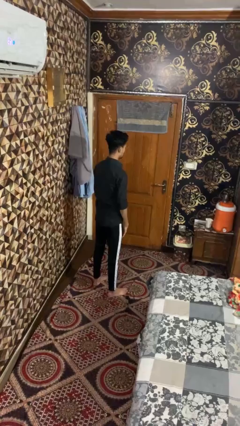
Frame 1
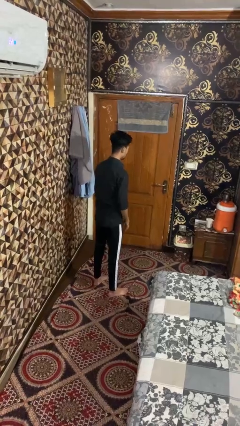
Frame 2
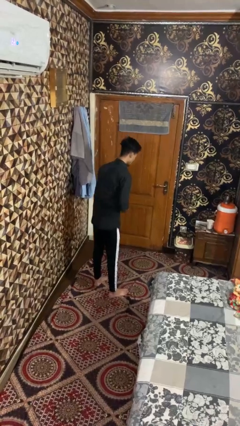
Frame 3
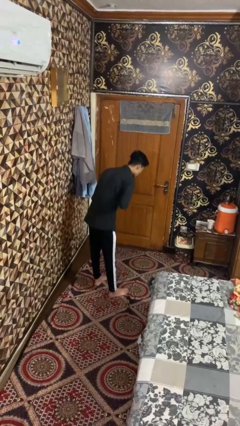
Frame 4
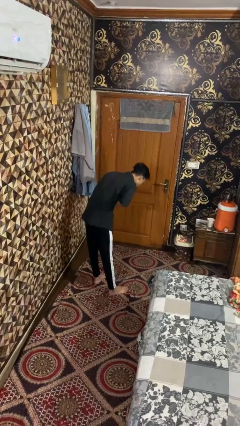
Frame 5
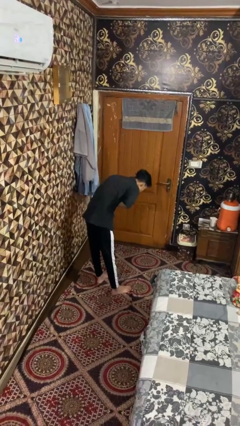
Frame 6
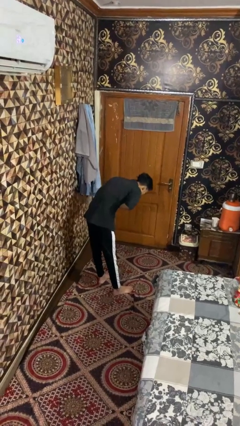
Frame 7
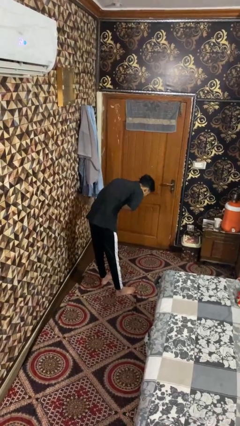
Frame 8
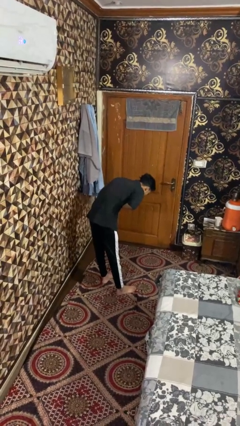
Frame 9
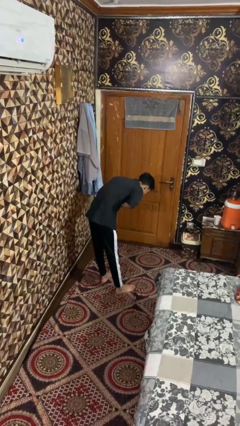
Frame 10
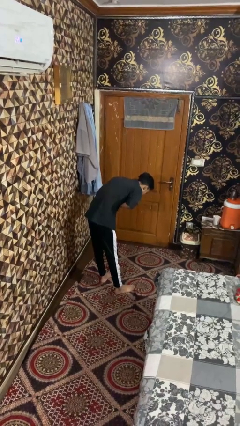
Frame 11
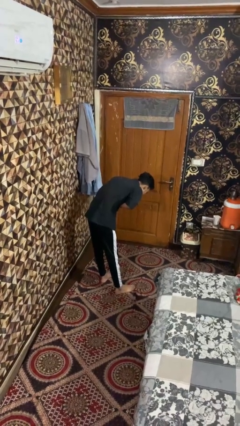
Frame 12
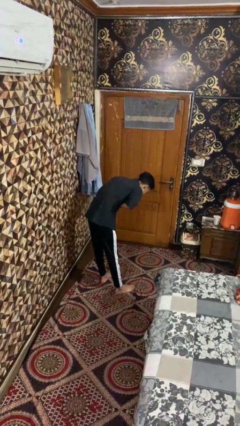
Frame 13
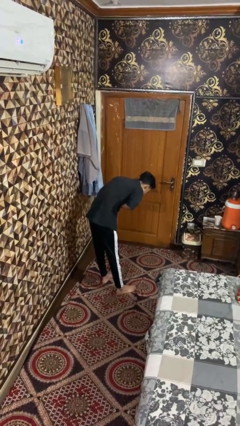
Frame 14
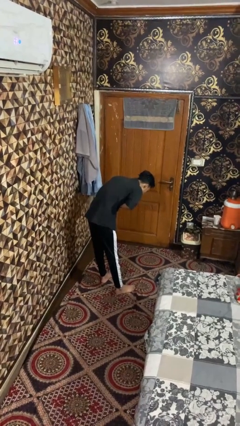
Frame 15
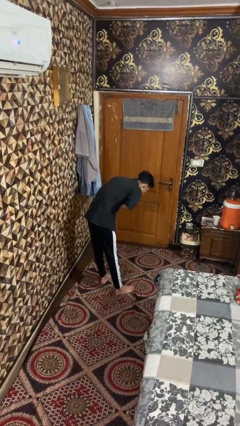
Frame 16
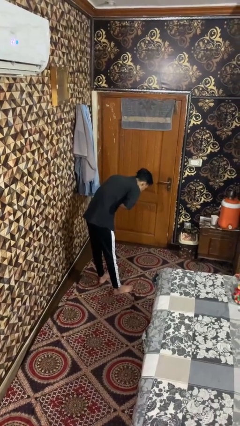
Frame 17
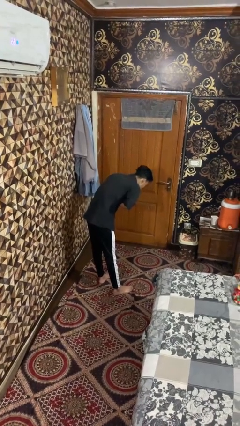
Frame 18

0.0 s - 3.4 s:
person bows

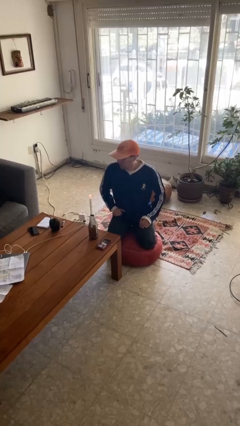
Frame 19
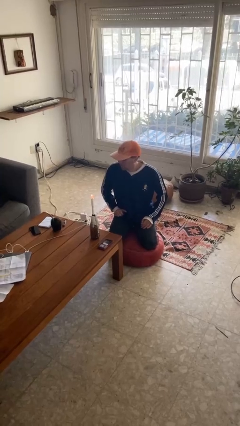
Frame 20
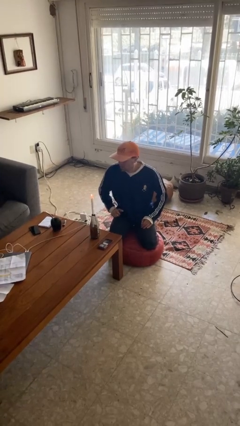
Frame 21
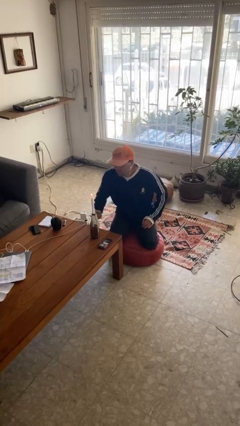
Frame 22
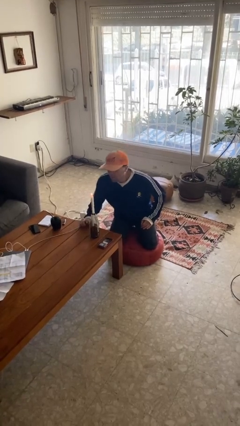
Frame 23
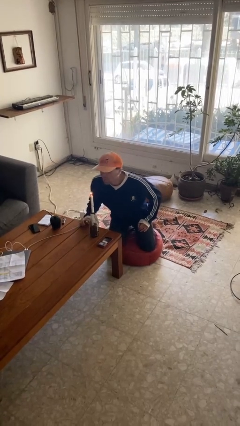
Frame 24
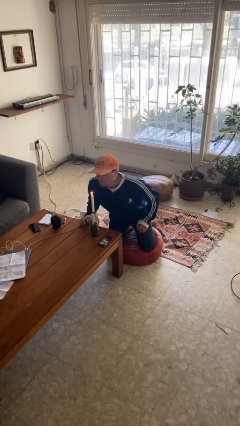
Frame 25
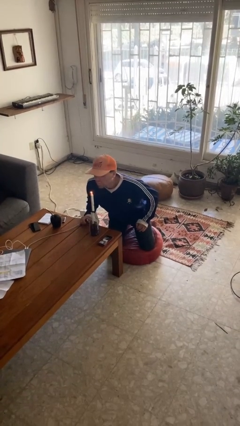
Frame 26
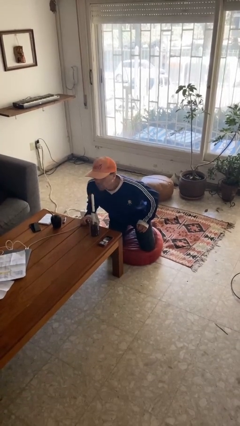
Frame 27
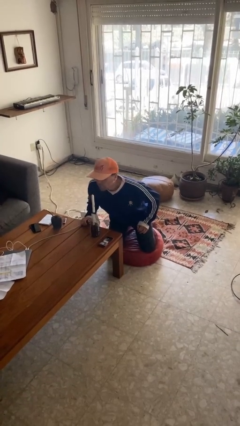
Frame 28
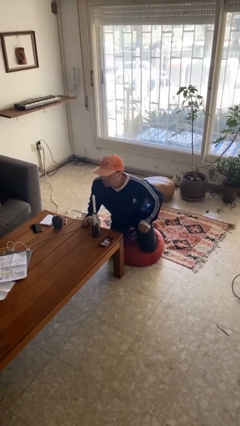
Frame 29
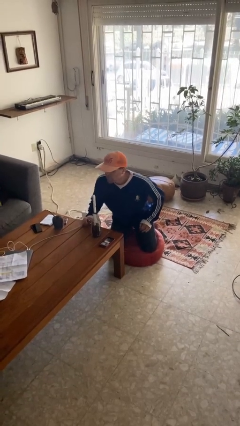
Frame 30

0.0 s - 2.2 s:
person extinguishes candle

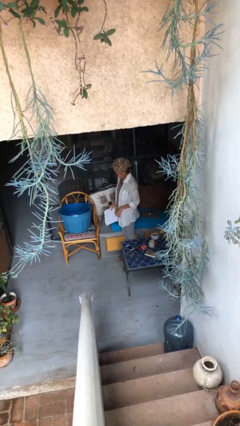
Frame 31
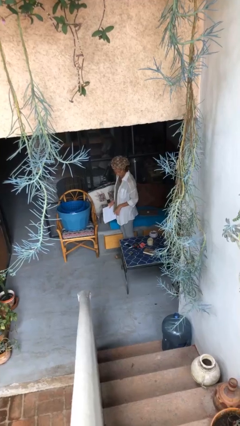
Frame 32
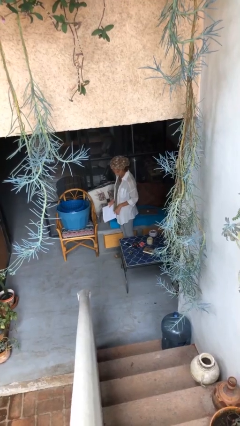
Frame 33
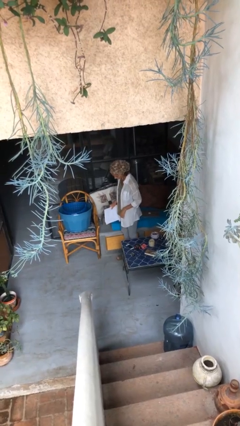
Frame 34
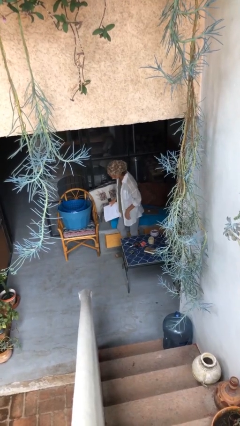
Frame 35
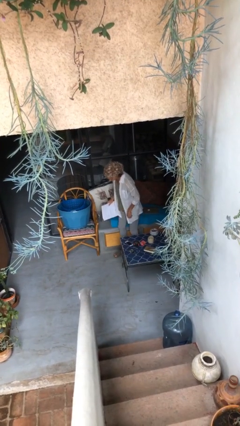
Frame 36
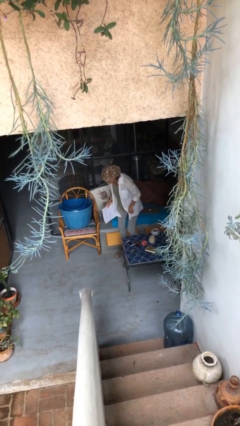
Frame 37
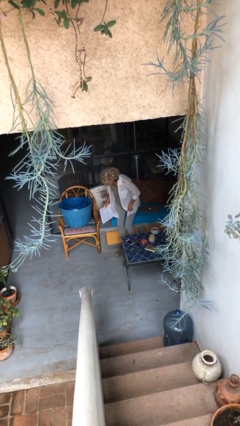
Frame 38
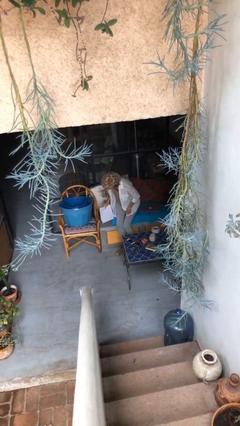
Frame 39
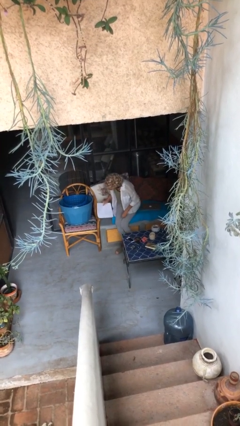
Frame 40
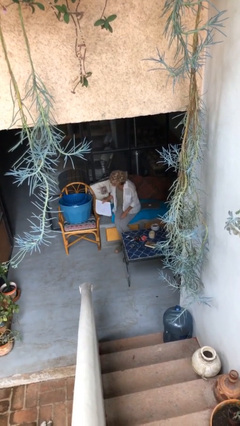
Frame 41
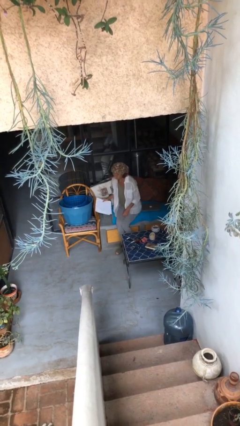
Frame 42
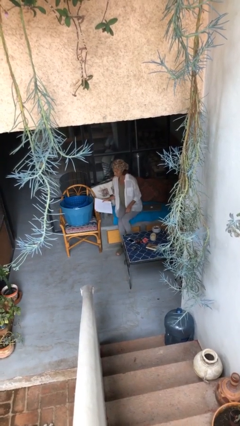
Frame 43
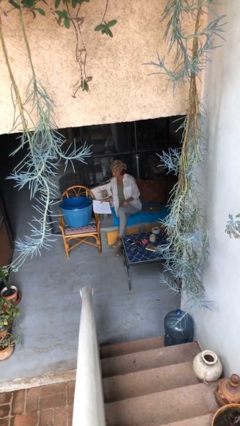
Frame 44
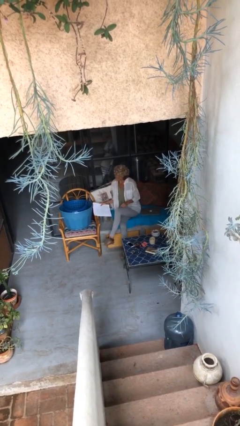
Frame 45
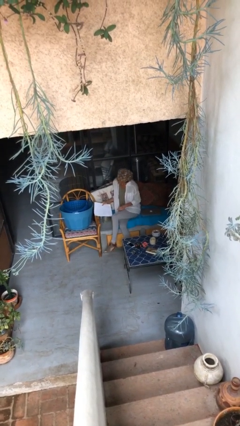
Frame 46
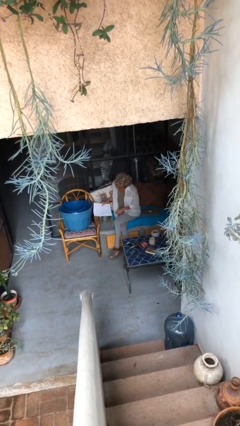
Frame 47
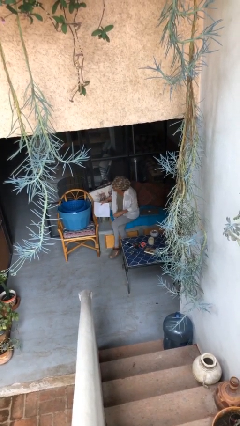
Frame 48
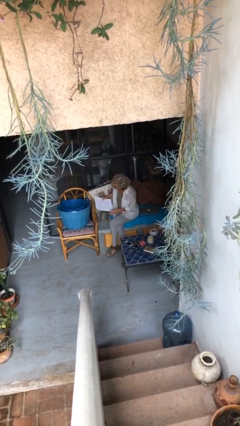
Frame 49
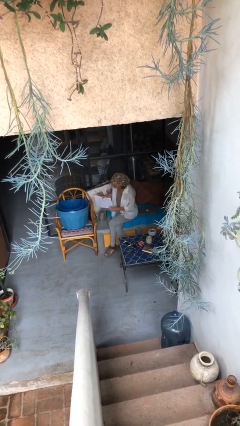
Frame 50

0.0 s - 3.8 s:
person sits down

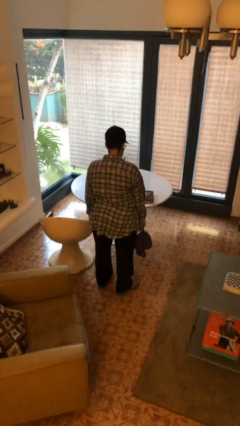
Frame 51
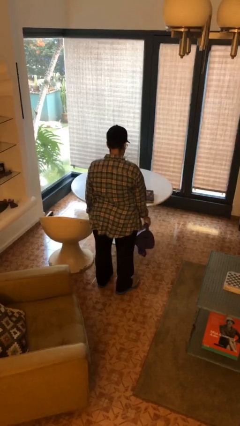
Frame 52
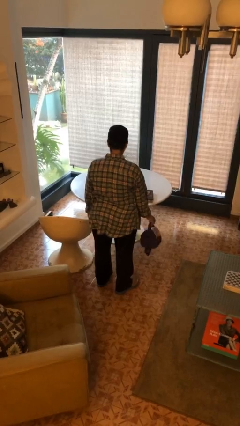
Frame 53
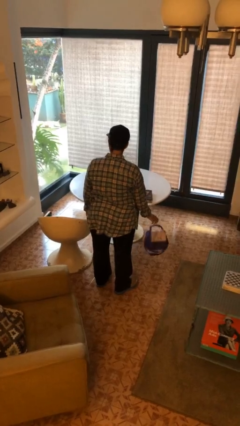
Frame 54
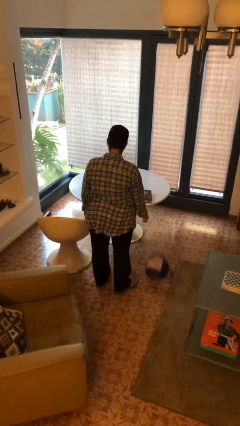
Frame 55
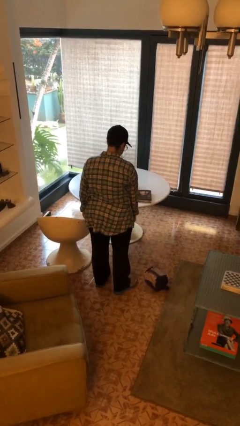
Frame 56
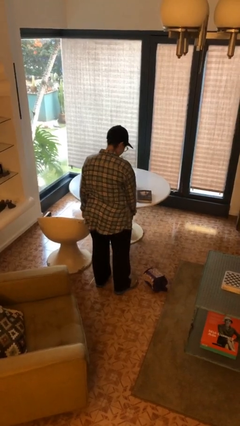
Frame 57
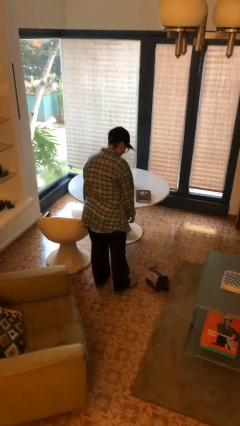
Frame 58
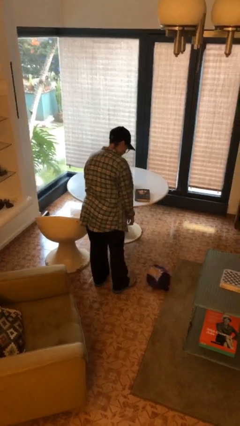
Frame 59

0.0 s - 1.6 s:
person drops object

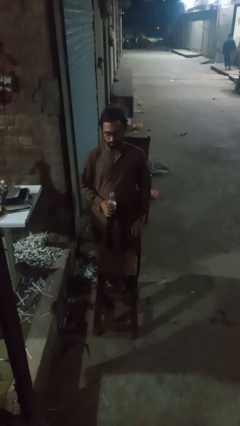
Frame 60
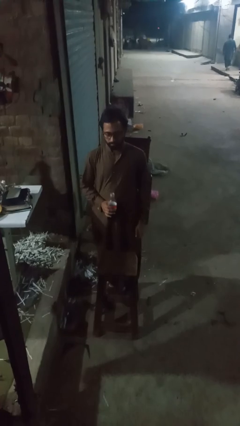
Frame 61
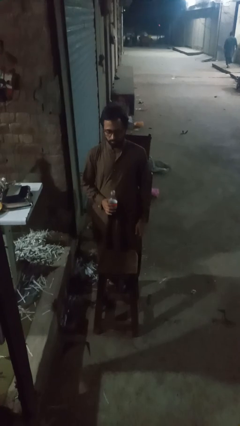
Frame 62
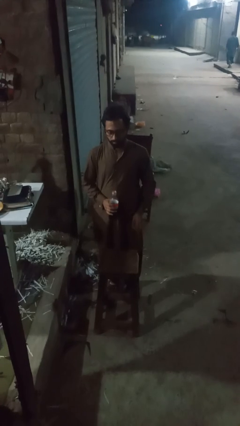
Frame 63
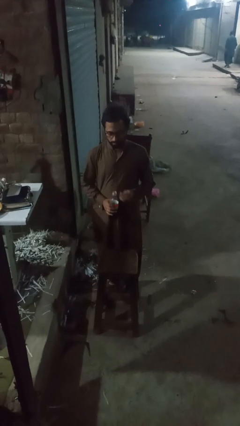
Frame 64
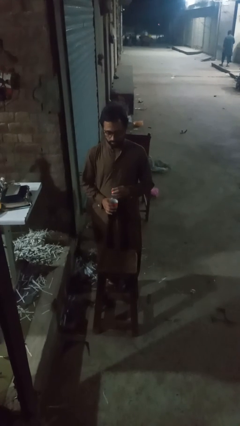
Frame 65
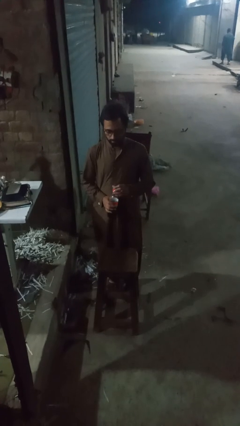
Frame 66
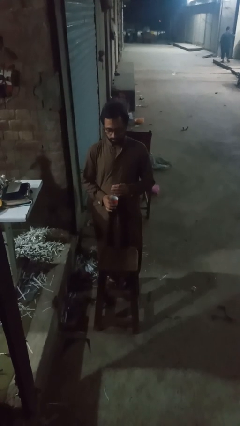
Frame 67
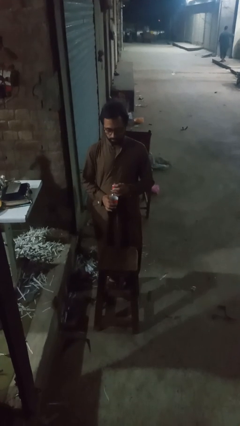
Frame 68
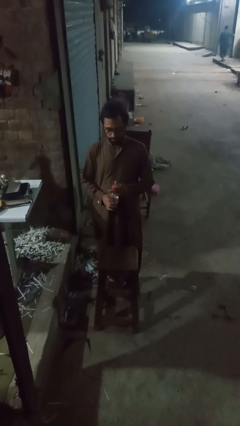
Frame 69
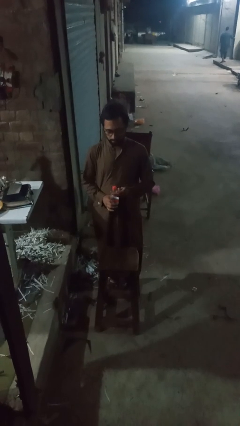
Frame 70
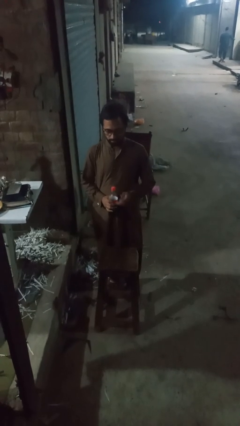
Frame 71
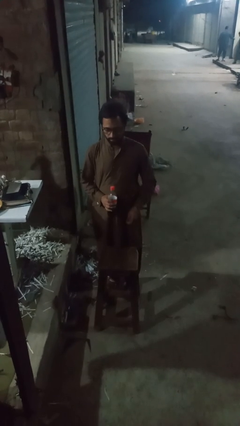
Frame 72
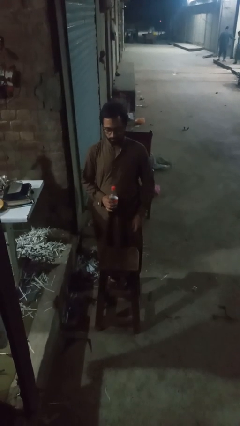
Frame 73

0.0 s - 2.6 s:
person screws lid to bottle

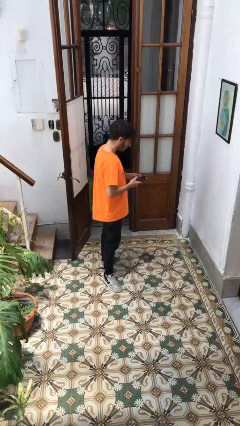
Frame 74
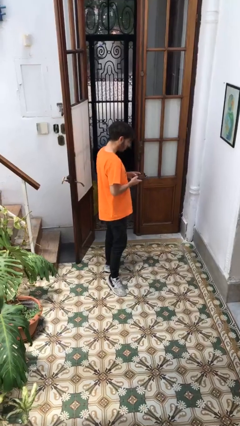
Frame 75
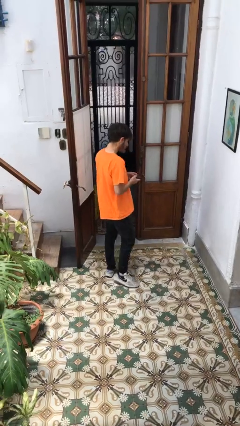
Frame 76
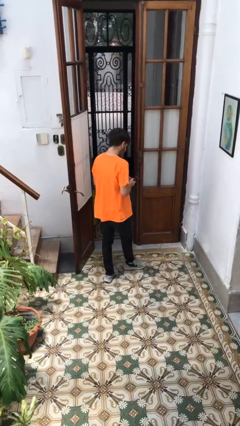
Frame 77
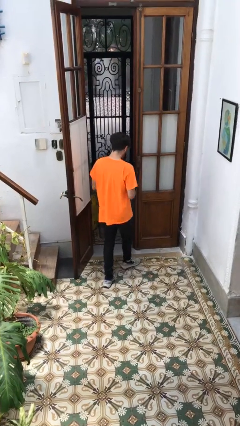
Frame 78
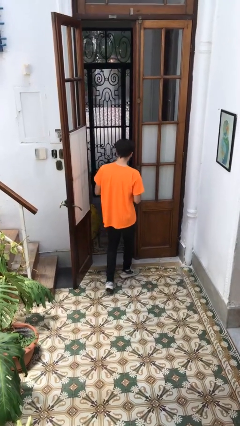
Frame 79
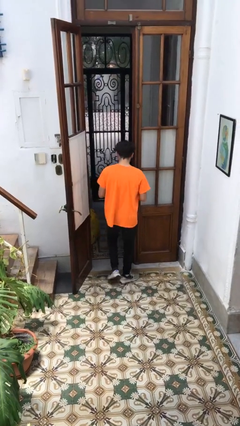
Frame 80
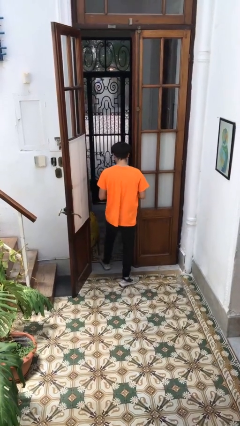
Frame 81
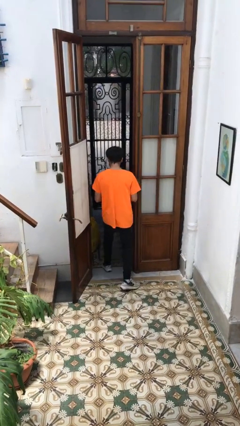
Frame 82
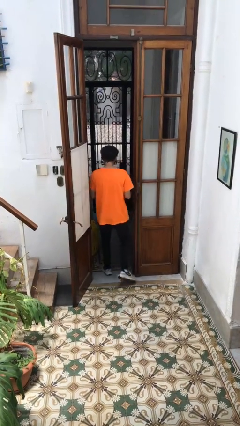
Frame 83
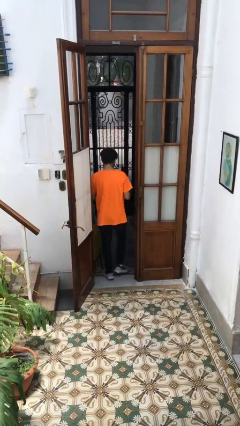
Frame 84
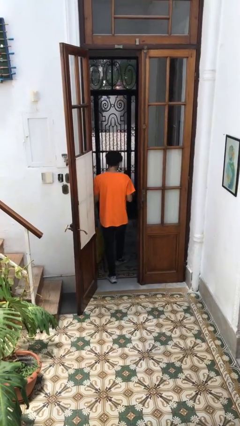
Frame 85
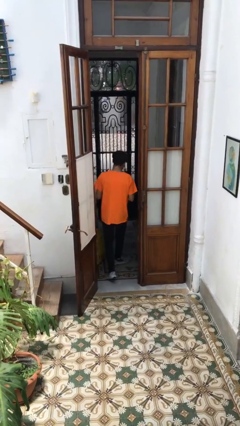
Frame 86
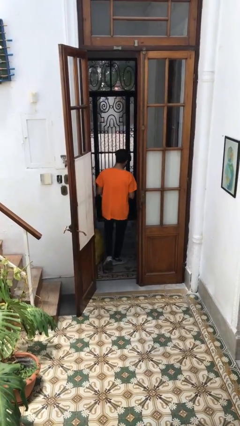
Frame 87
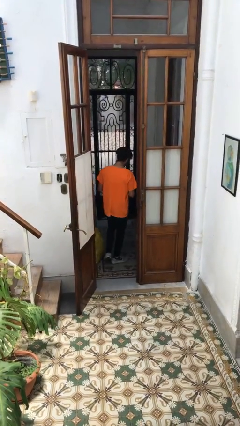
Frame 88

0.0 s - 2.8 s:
person exits scene through structure

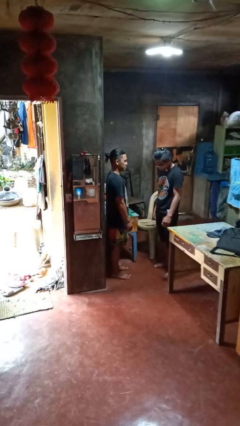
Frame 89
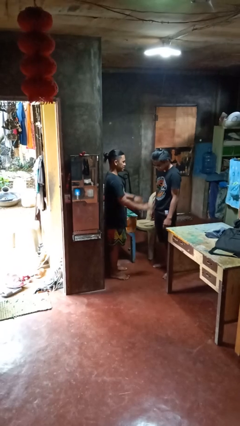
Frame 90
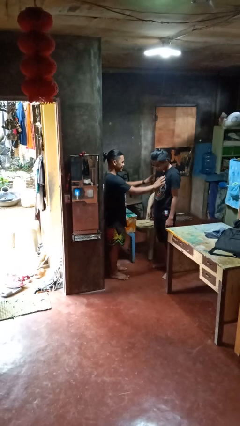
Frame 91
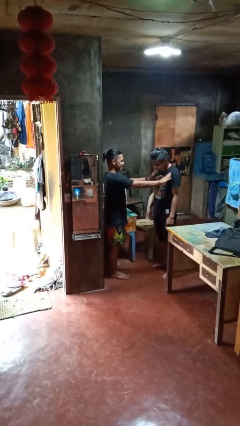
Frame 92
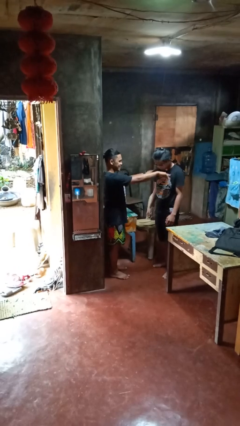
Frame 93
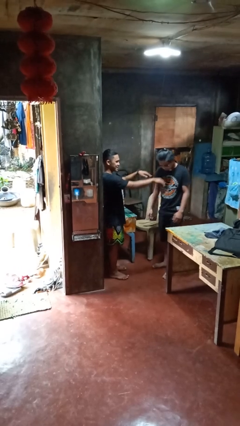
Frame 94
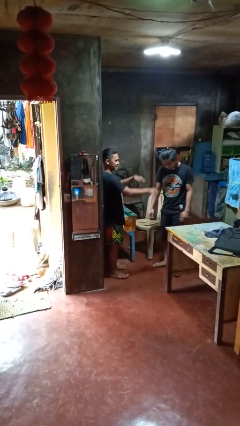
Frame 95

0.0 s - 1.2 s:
person shoves person
